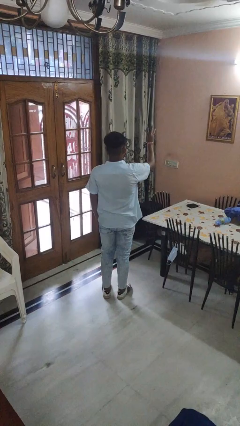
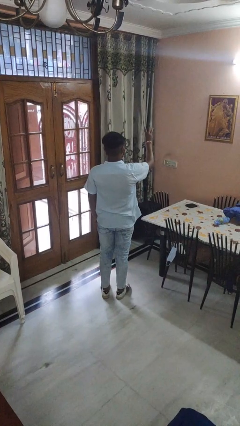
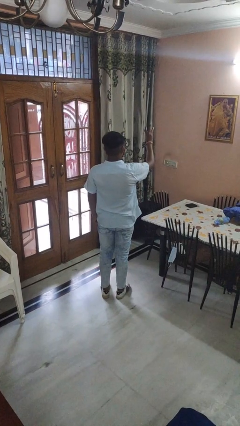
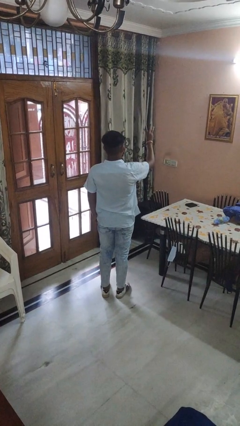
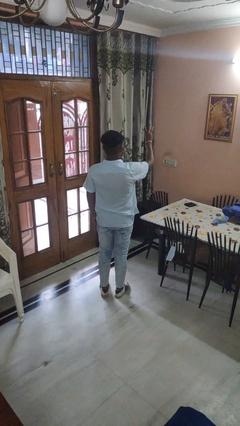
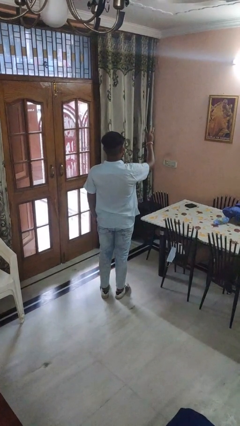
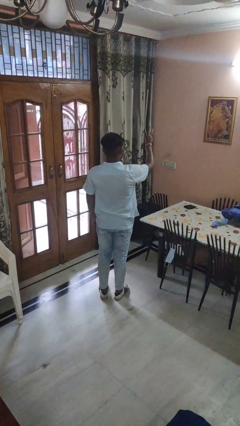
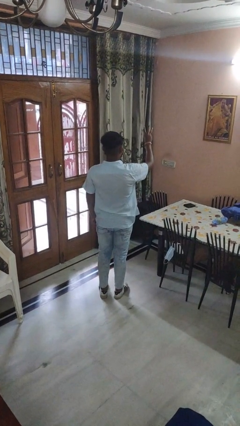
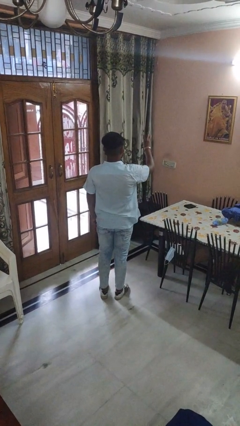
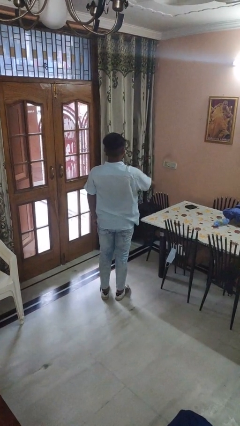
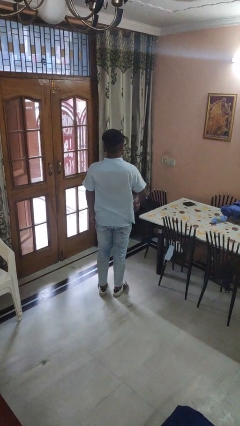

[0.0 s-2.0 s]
person gestures number three

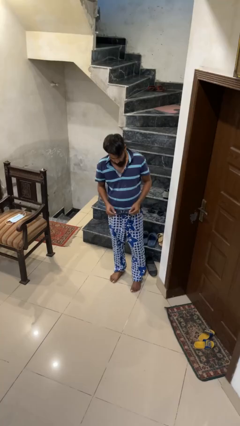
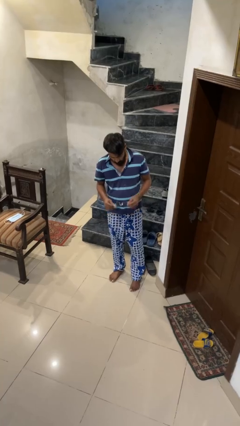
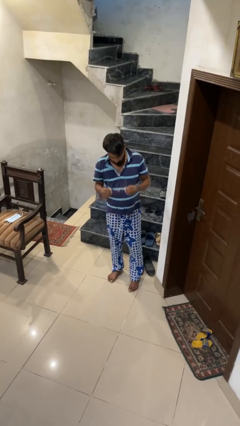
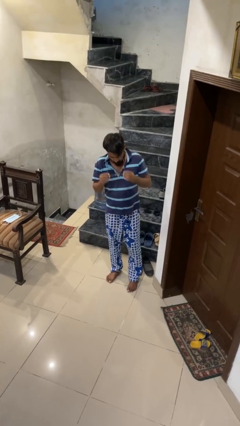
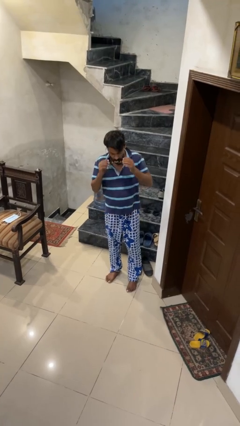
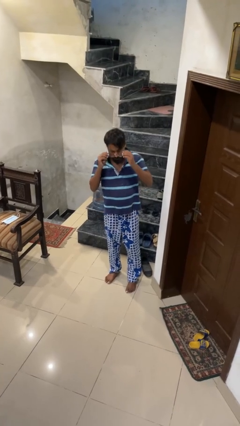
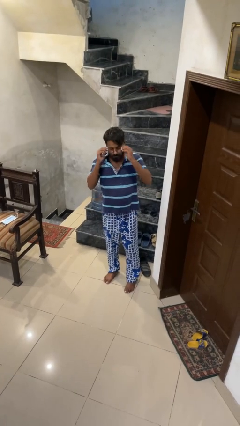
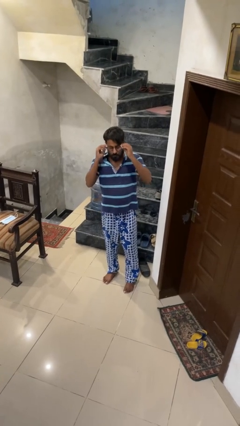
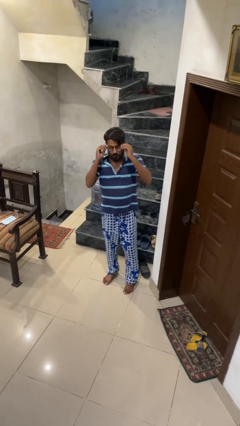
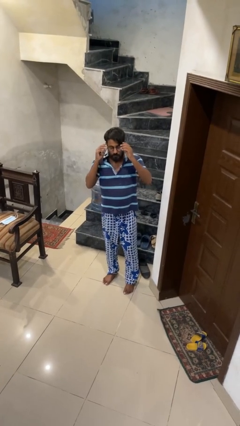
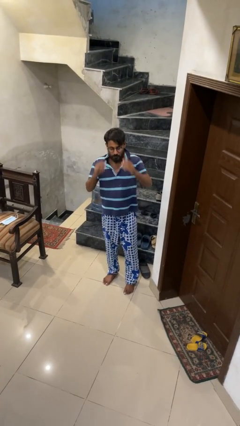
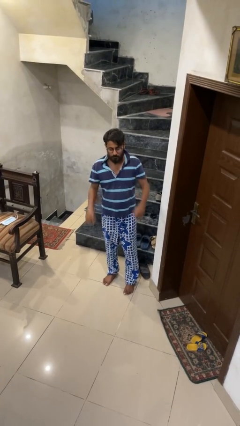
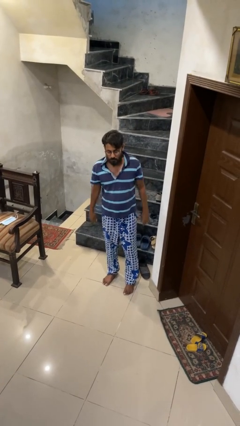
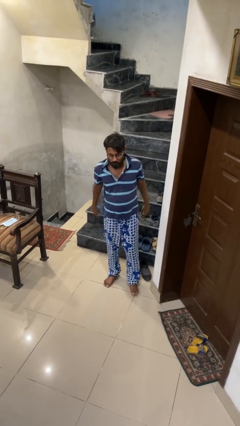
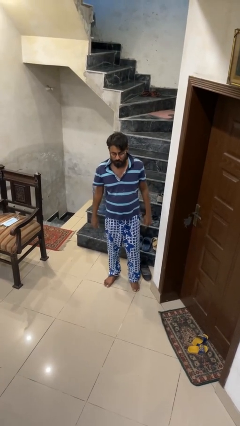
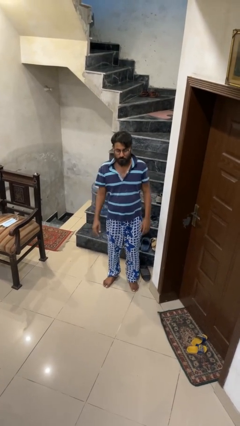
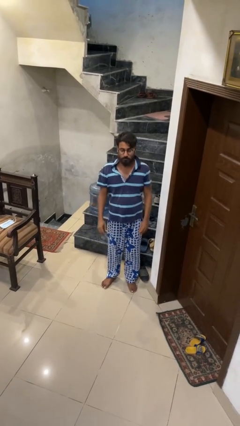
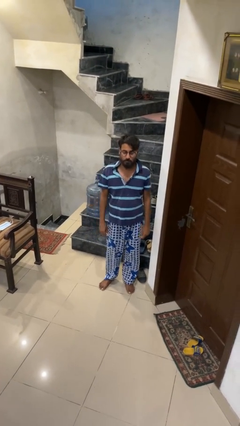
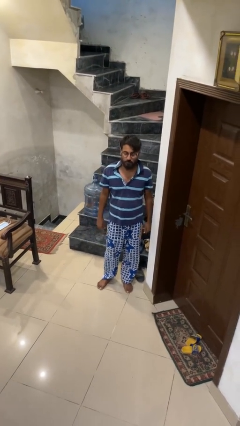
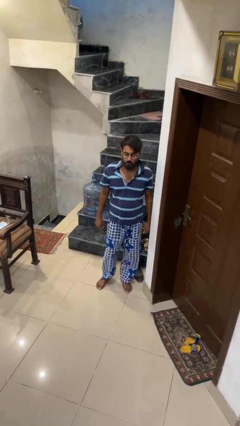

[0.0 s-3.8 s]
person puts on glasses

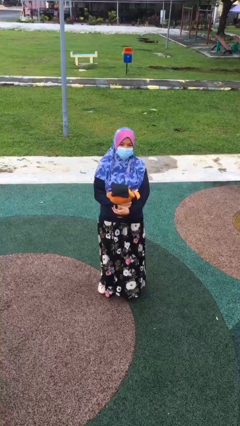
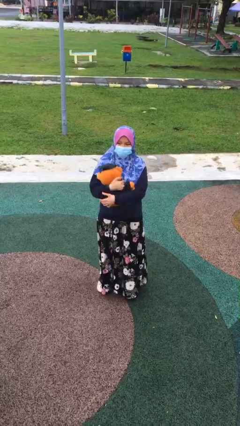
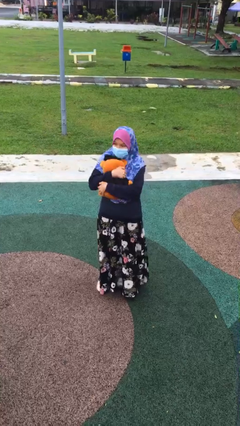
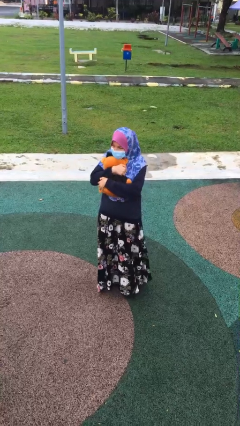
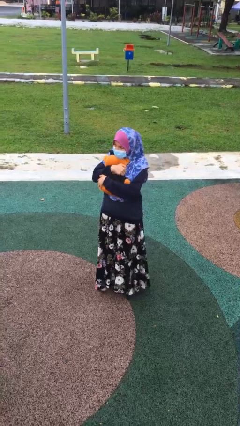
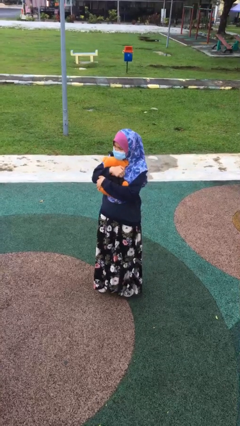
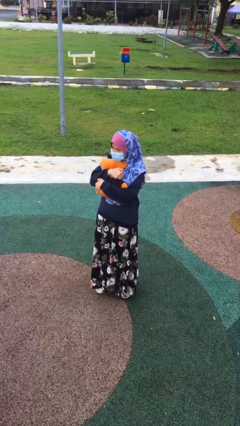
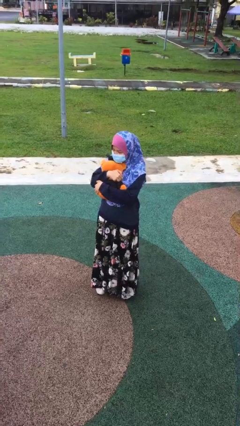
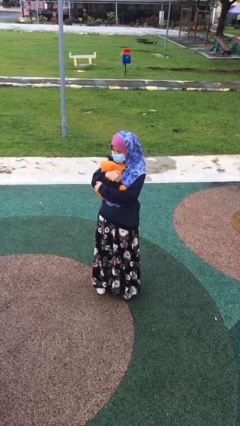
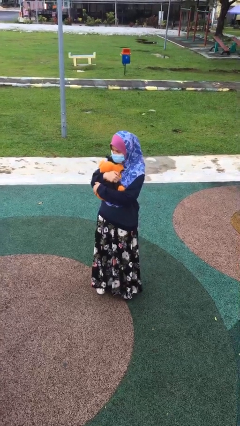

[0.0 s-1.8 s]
person hugs stuffed animal

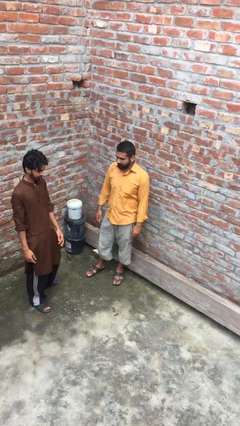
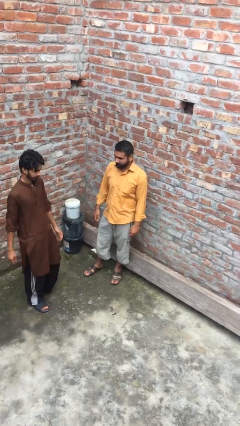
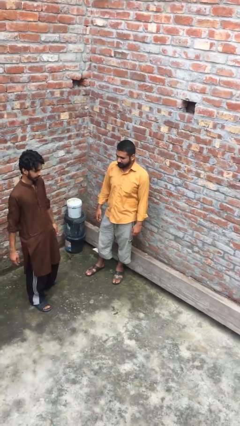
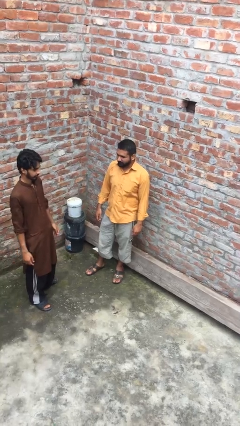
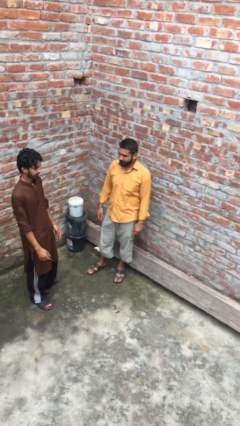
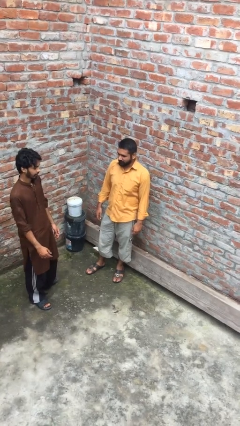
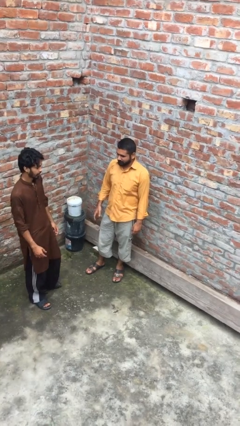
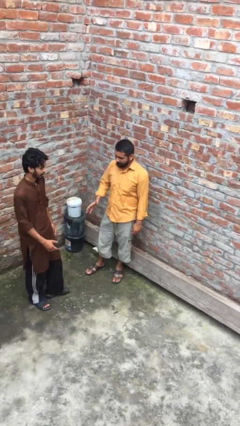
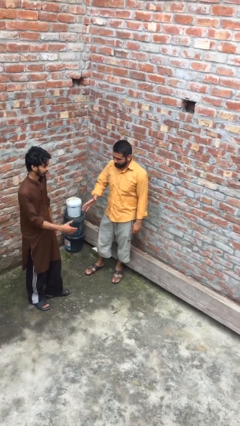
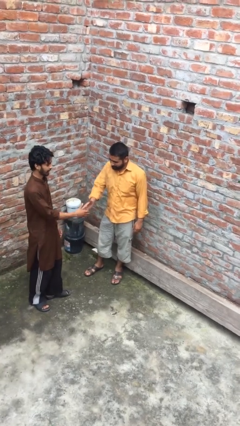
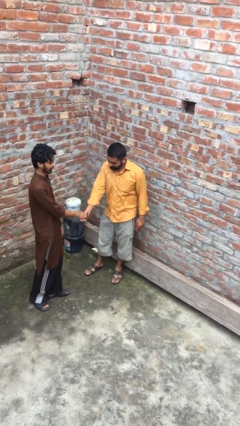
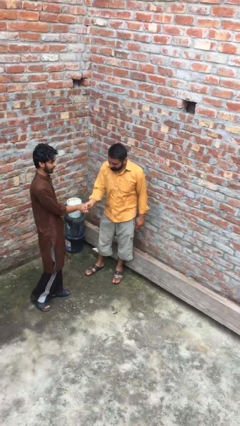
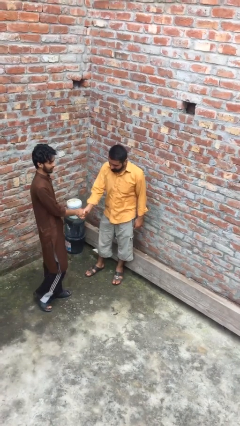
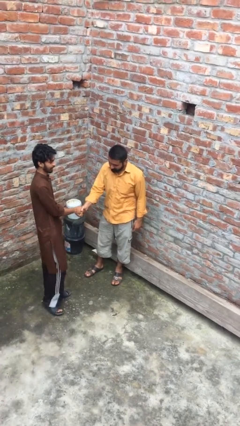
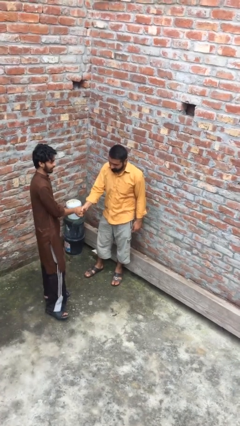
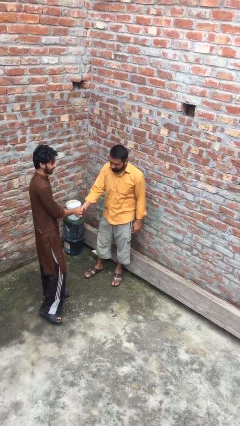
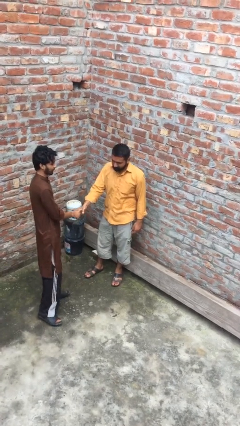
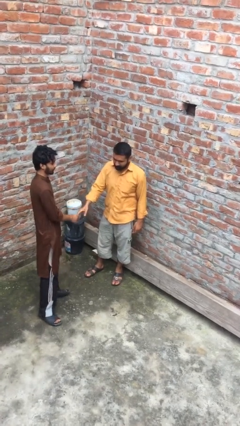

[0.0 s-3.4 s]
person shakes hand

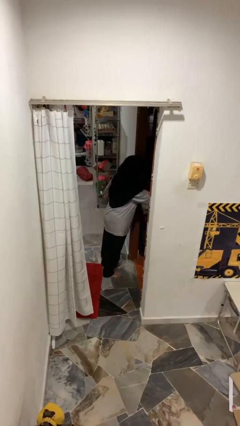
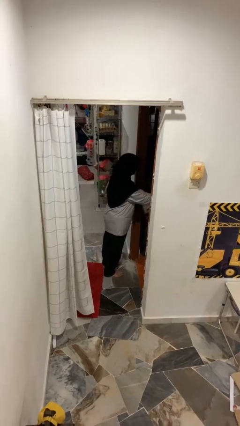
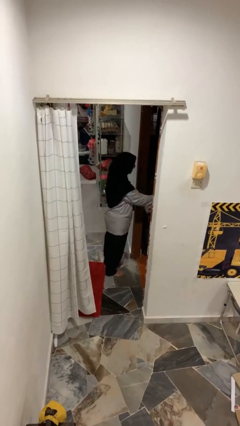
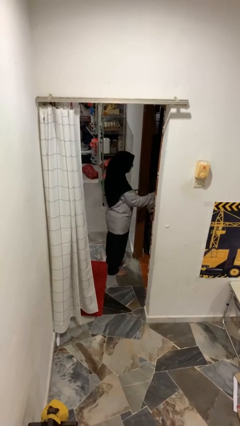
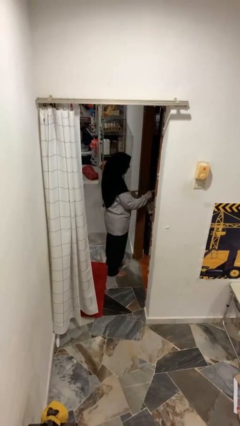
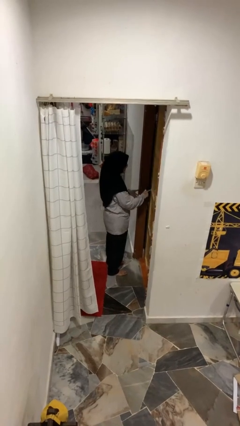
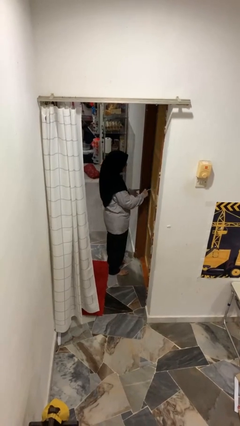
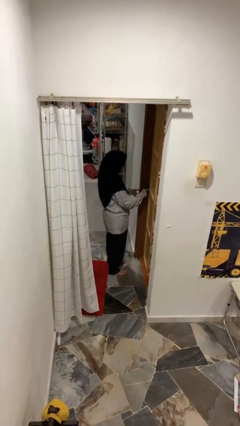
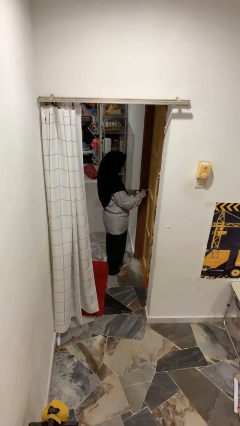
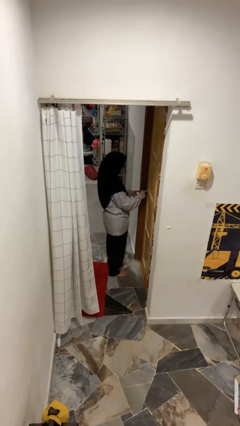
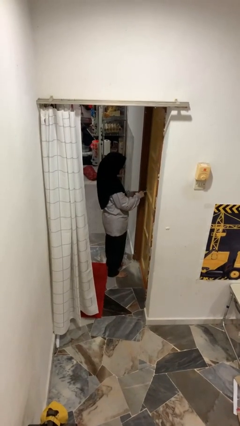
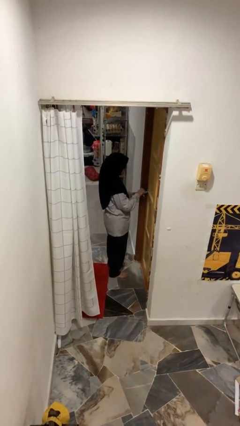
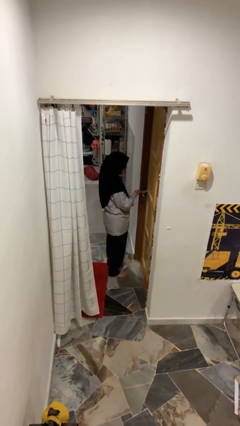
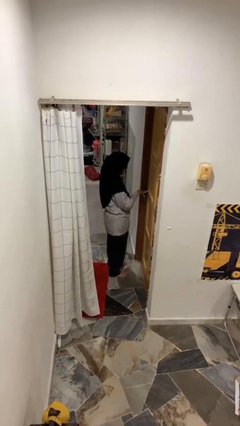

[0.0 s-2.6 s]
person closes facility door

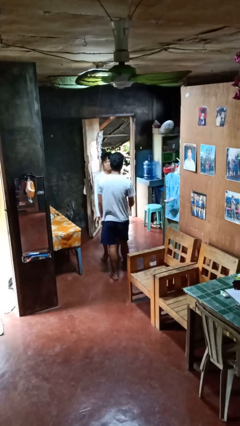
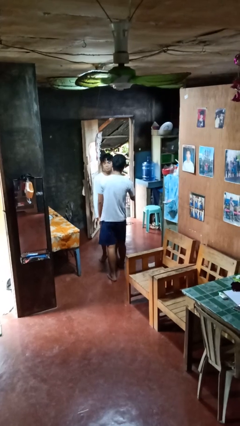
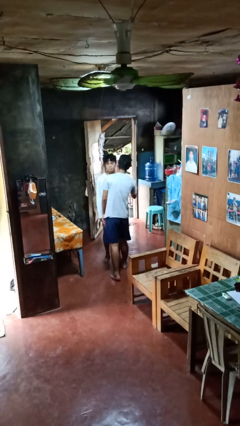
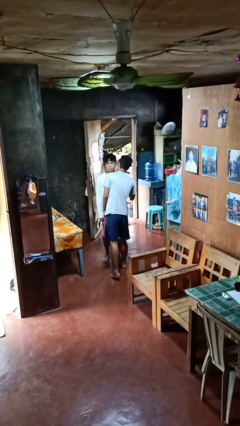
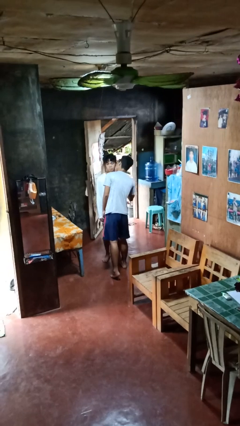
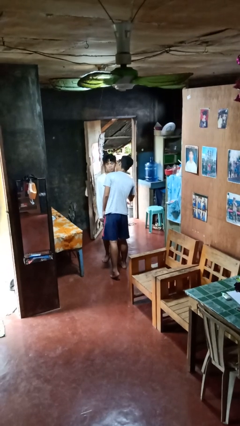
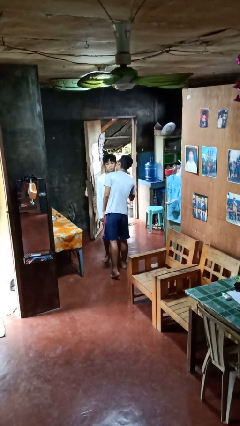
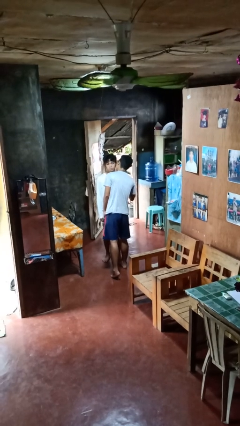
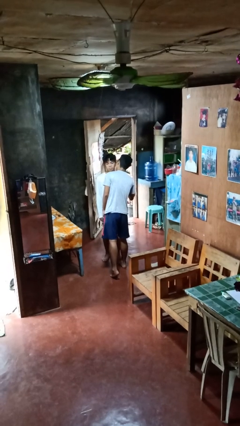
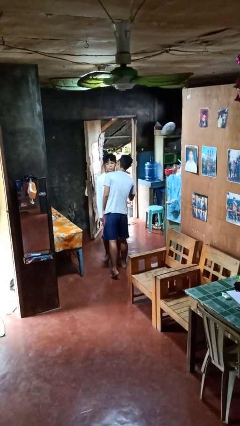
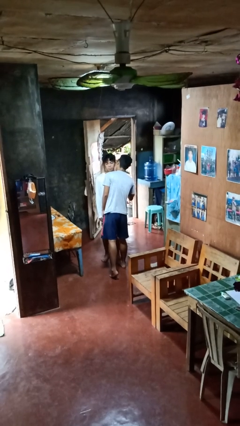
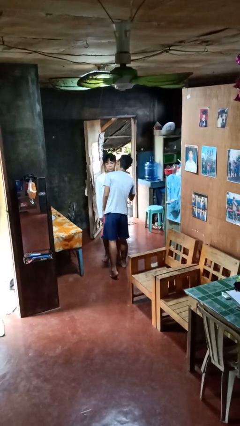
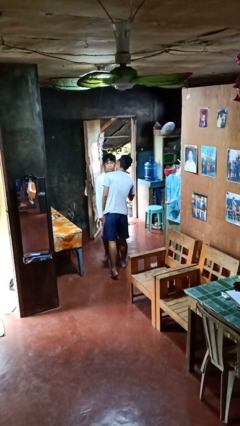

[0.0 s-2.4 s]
person kisses cheek of person

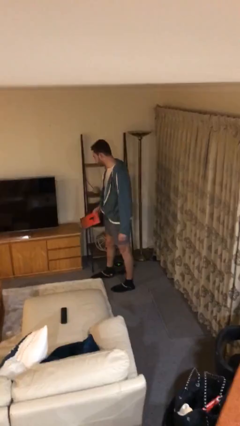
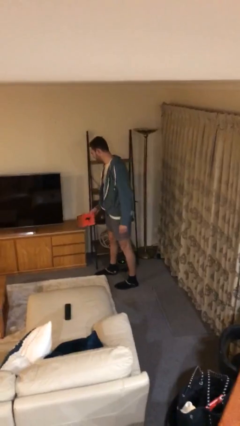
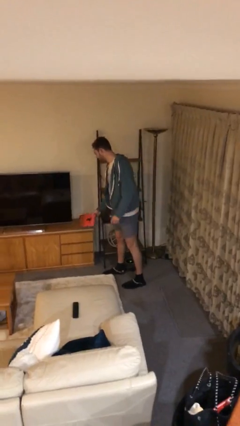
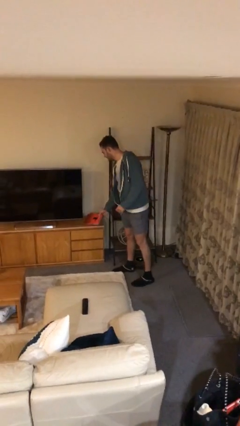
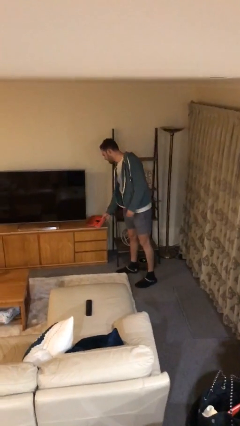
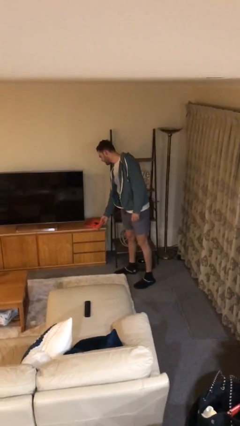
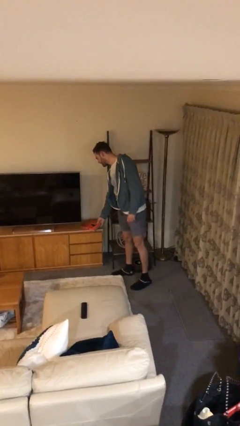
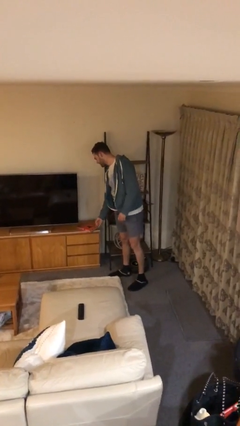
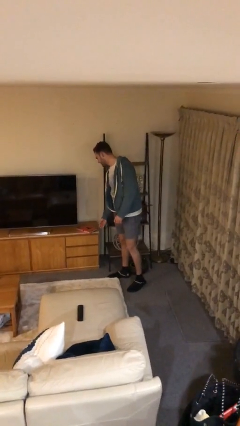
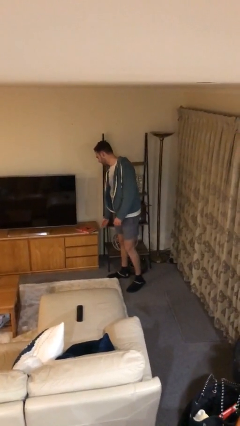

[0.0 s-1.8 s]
person puts down object on table
